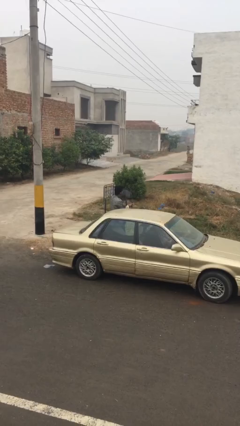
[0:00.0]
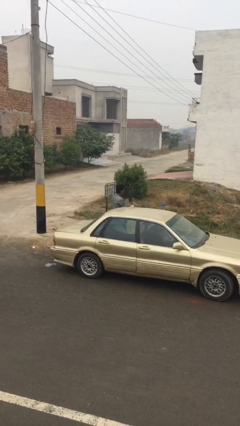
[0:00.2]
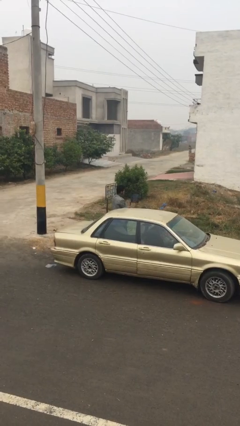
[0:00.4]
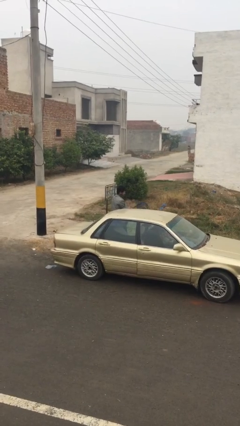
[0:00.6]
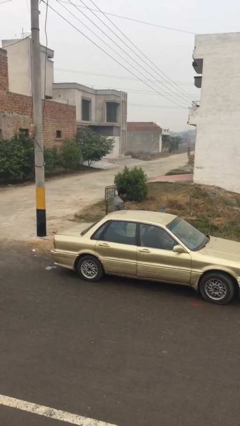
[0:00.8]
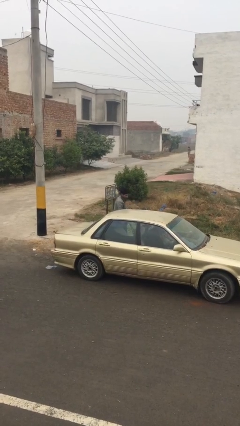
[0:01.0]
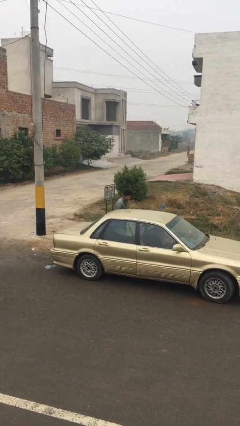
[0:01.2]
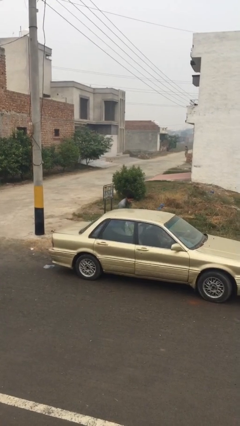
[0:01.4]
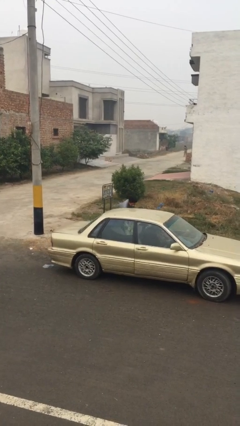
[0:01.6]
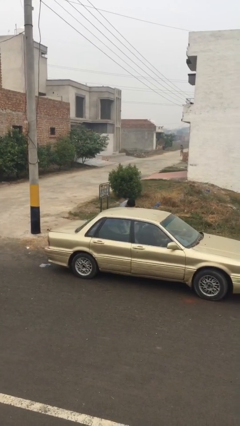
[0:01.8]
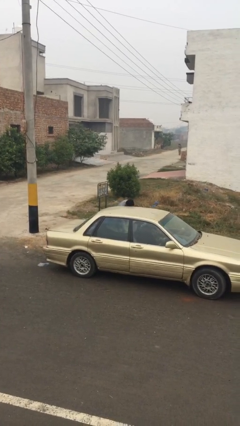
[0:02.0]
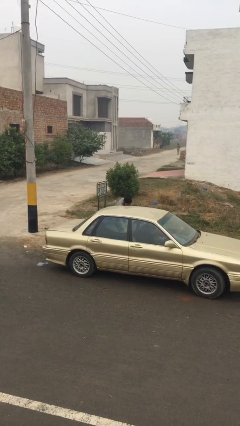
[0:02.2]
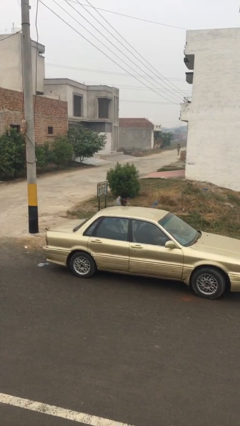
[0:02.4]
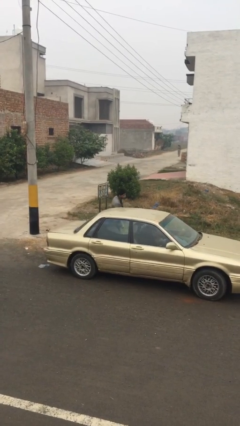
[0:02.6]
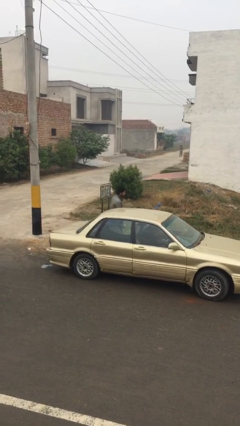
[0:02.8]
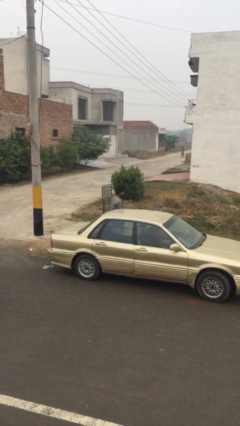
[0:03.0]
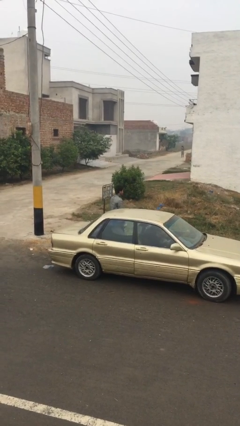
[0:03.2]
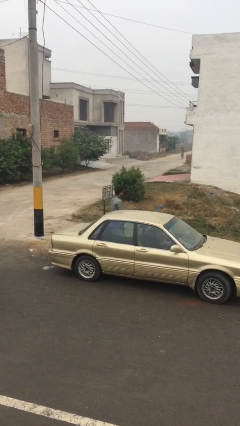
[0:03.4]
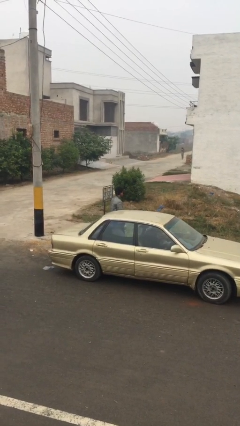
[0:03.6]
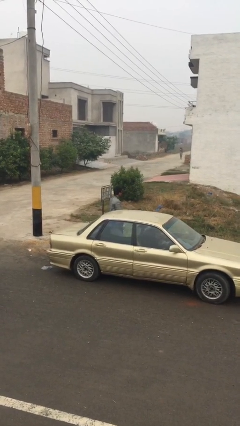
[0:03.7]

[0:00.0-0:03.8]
person loads car

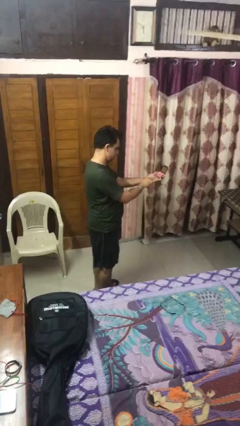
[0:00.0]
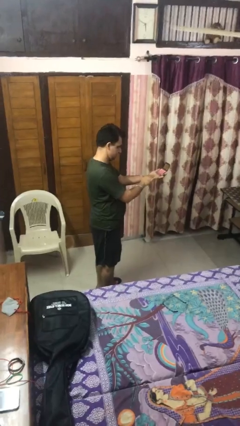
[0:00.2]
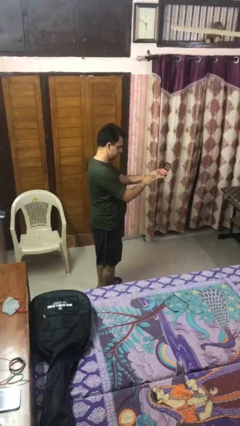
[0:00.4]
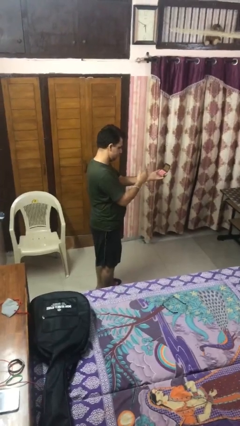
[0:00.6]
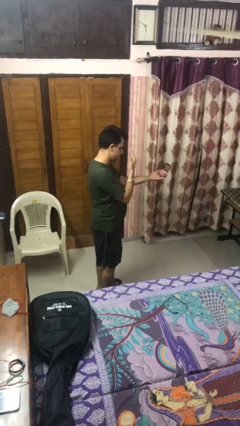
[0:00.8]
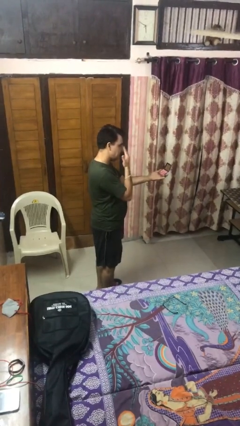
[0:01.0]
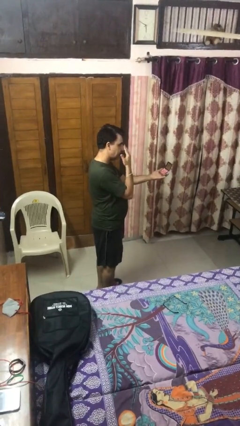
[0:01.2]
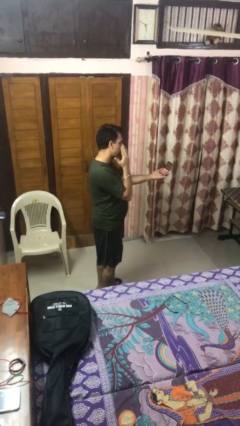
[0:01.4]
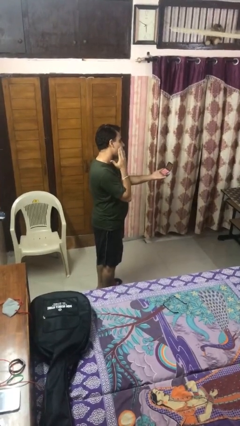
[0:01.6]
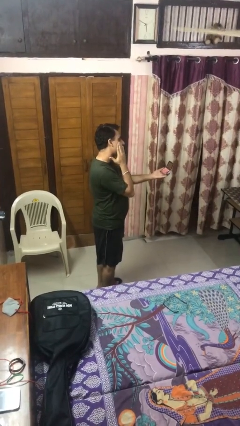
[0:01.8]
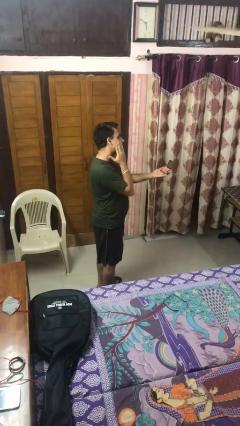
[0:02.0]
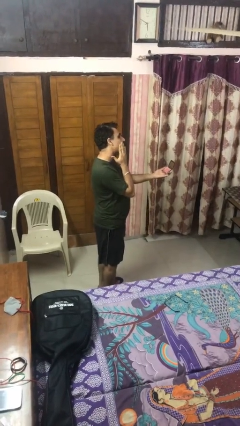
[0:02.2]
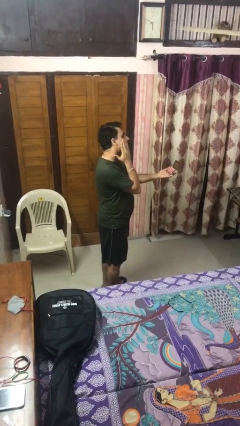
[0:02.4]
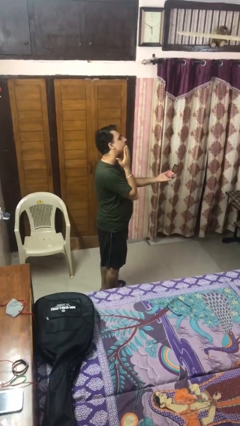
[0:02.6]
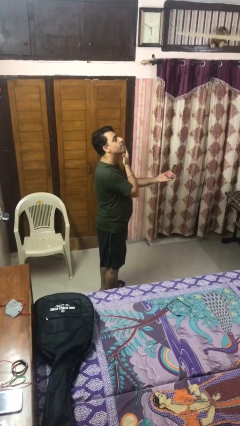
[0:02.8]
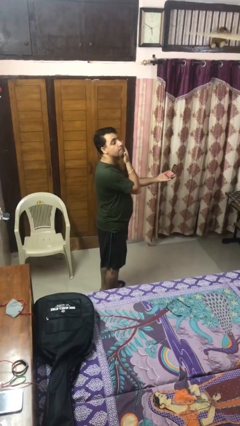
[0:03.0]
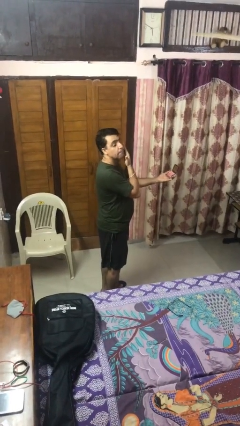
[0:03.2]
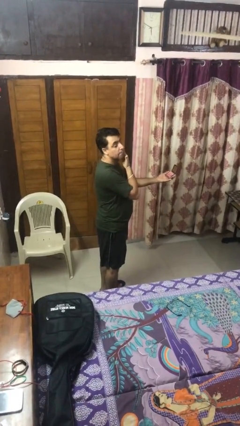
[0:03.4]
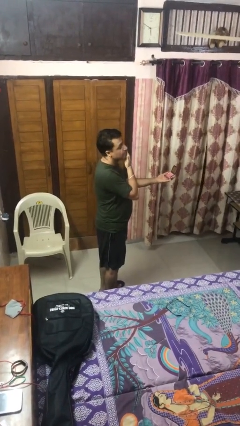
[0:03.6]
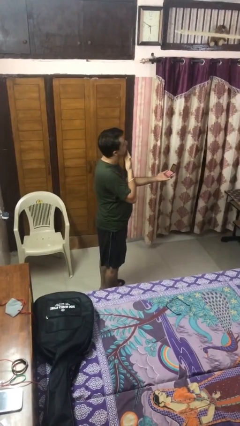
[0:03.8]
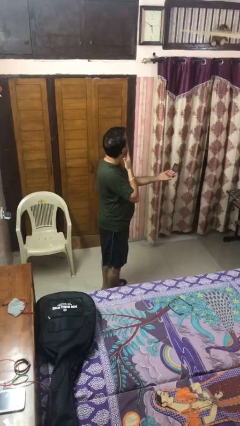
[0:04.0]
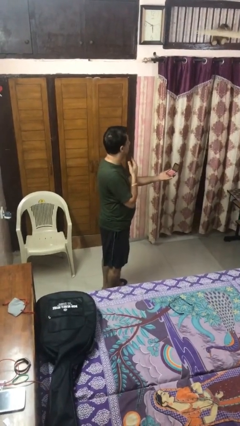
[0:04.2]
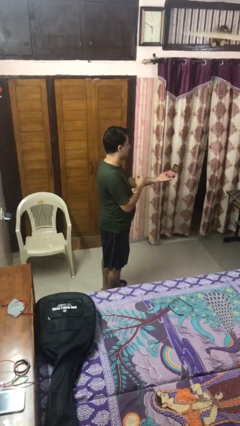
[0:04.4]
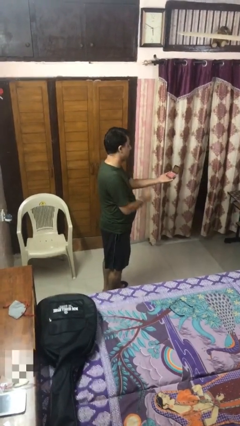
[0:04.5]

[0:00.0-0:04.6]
person applies foundation makeup

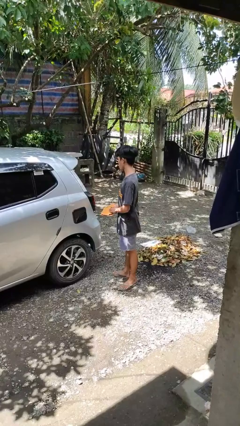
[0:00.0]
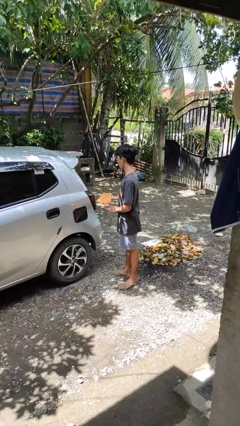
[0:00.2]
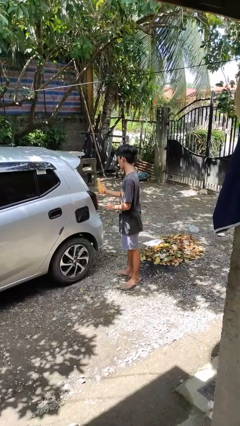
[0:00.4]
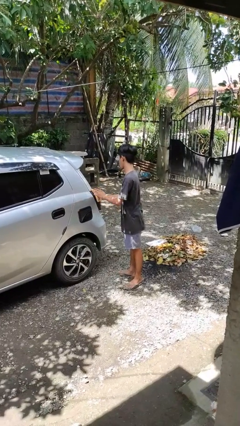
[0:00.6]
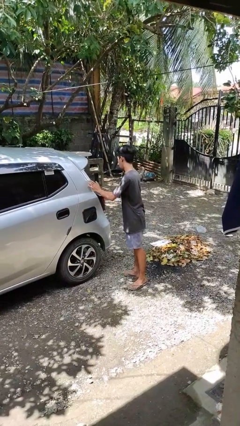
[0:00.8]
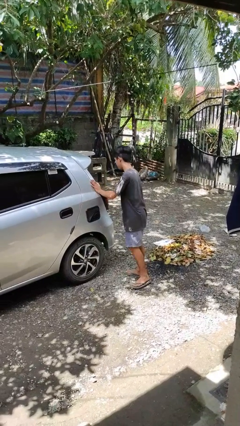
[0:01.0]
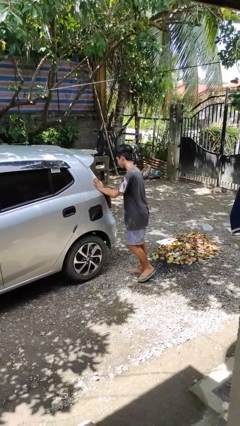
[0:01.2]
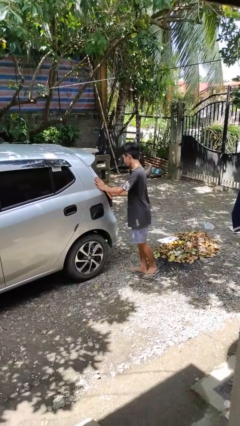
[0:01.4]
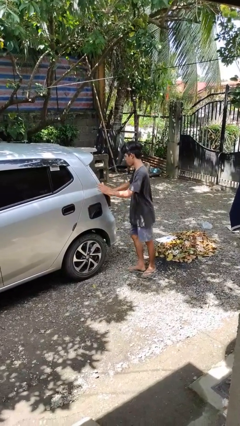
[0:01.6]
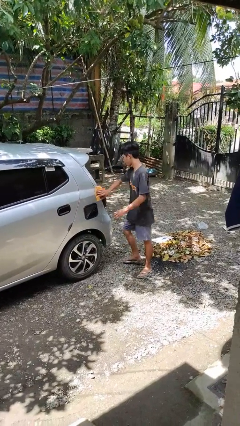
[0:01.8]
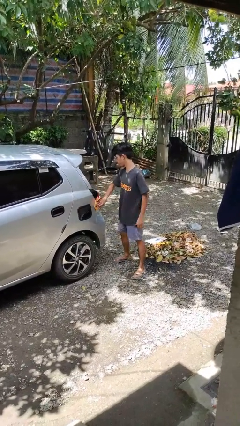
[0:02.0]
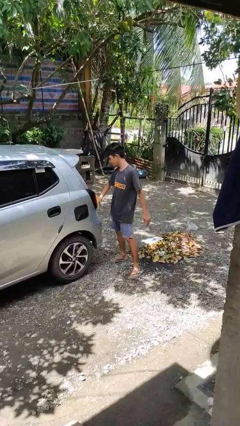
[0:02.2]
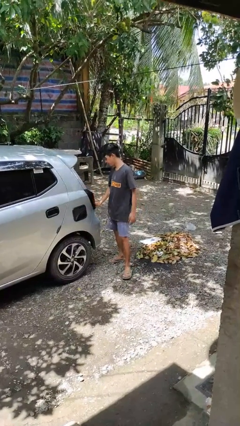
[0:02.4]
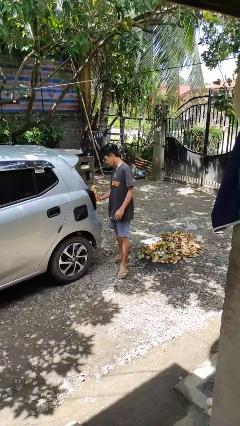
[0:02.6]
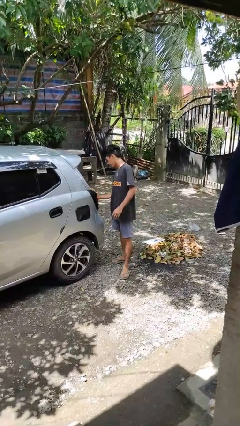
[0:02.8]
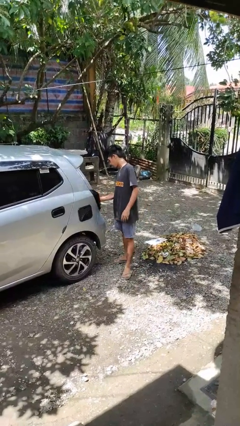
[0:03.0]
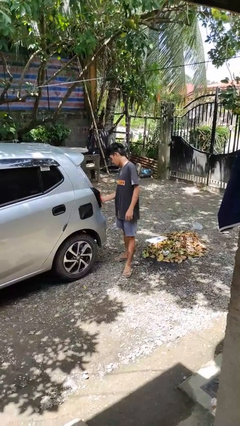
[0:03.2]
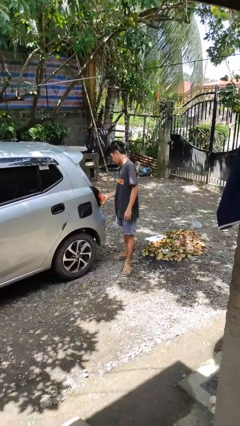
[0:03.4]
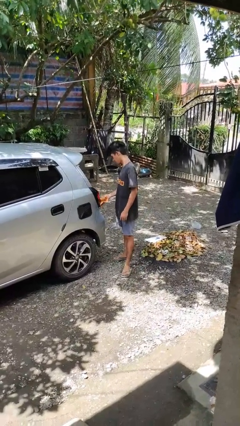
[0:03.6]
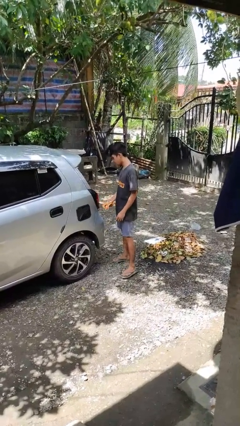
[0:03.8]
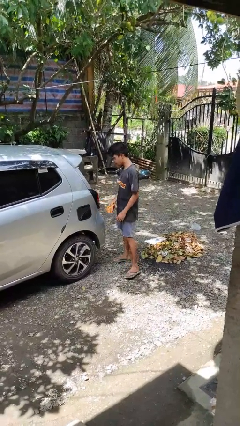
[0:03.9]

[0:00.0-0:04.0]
person polishes car with rag

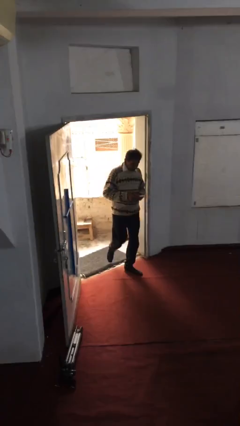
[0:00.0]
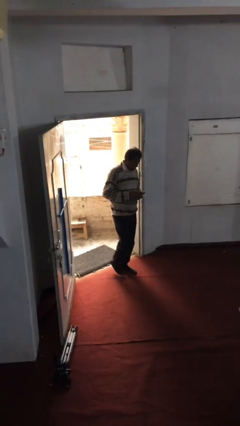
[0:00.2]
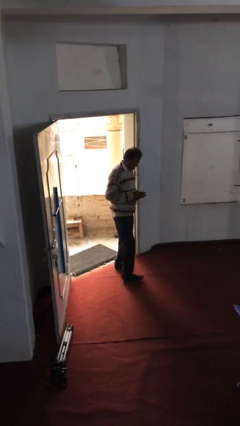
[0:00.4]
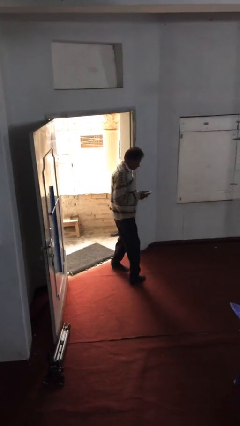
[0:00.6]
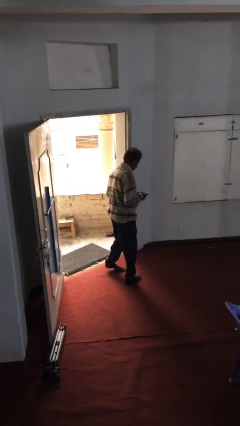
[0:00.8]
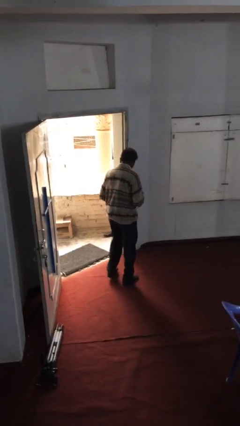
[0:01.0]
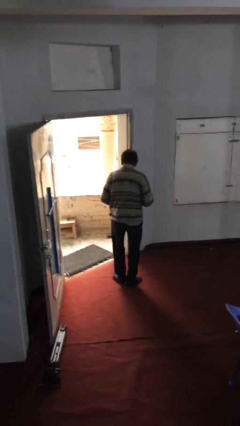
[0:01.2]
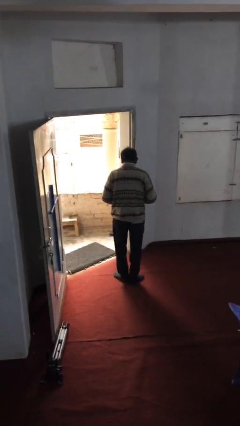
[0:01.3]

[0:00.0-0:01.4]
person enters scene through structure

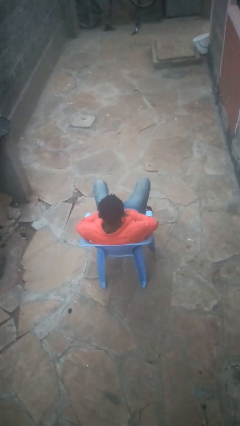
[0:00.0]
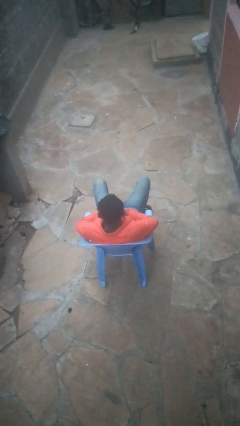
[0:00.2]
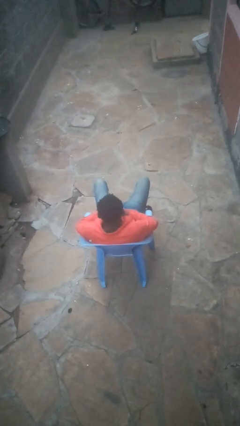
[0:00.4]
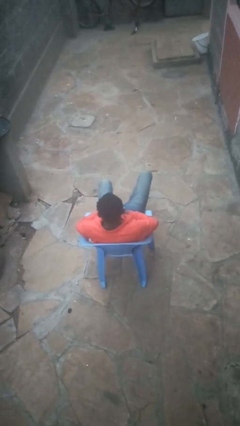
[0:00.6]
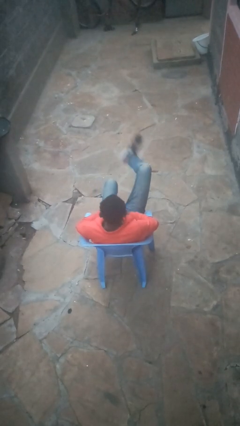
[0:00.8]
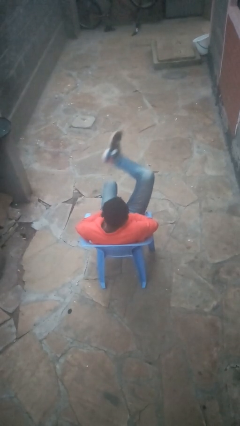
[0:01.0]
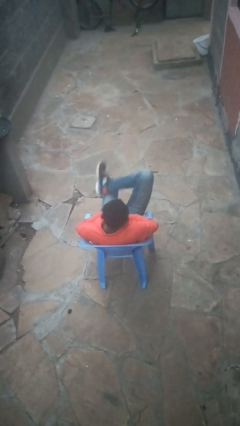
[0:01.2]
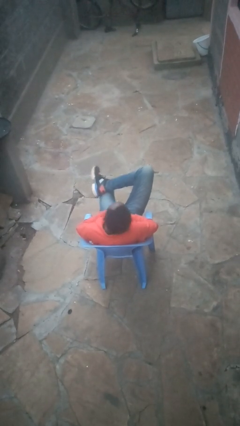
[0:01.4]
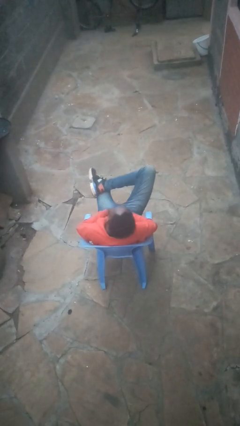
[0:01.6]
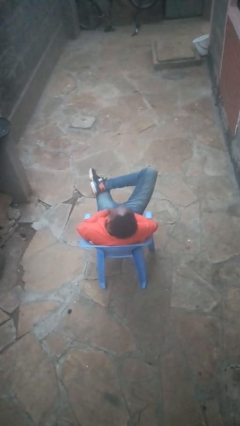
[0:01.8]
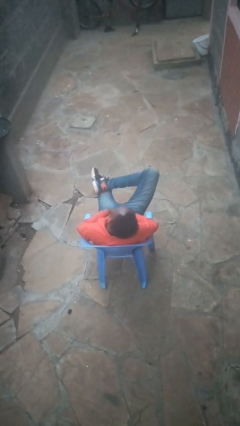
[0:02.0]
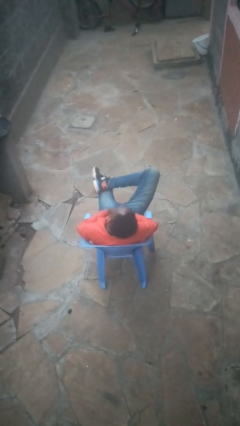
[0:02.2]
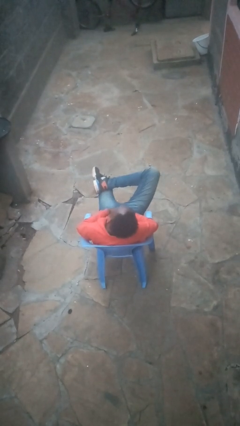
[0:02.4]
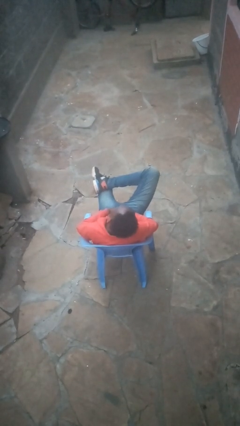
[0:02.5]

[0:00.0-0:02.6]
person crosses legs

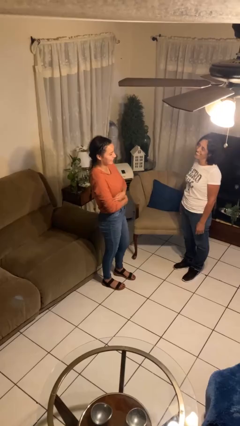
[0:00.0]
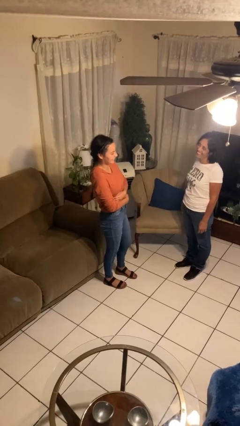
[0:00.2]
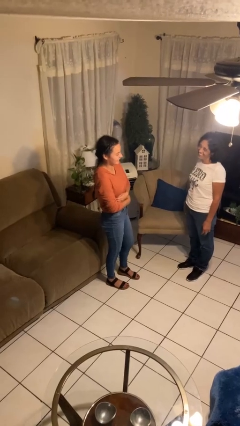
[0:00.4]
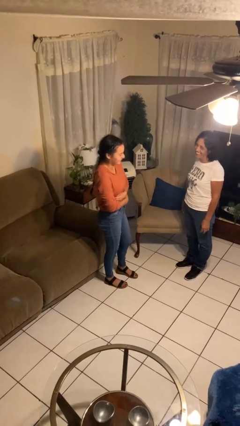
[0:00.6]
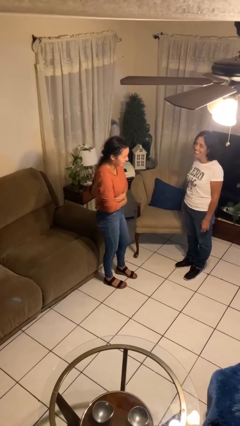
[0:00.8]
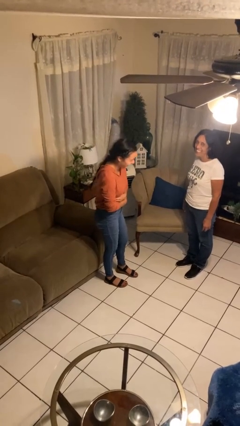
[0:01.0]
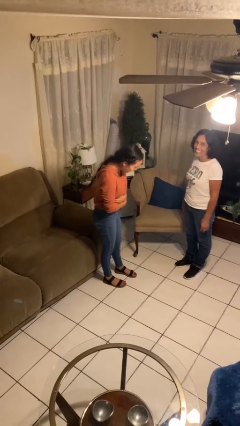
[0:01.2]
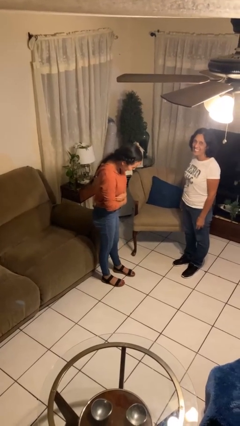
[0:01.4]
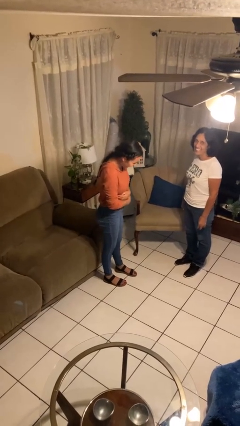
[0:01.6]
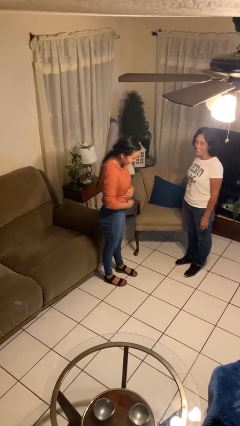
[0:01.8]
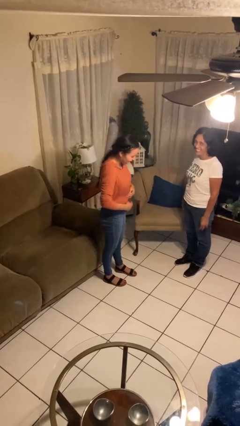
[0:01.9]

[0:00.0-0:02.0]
person laughs with person
